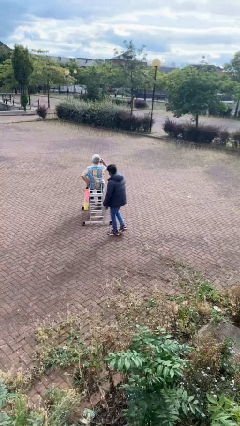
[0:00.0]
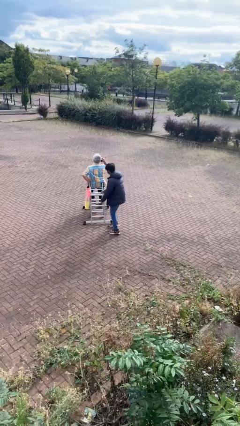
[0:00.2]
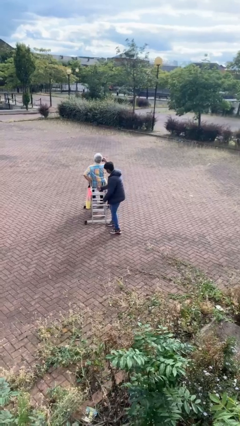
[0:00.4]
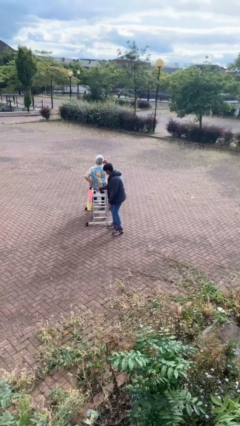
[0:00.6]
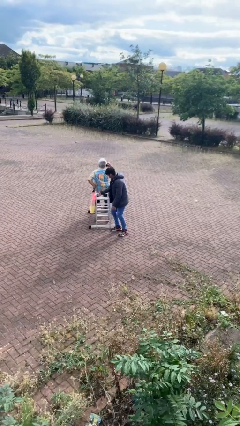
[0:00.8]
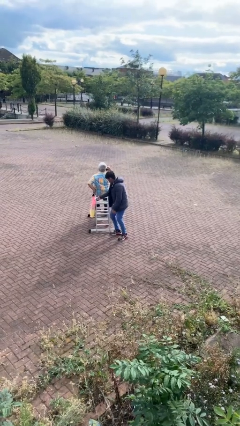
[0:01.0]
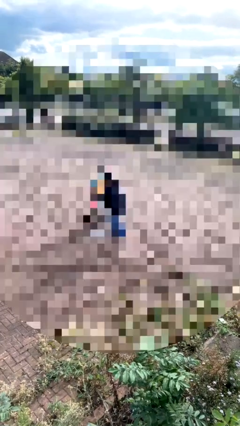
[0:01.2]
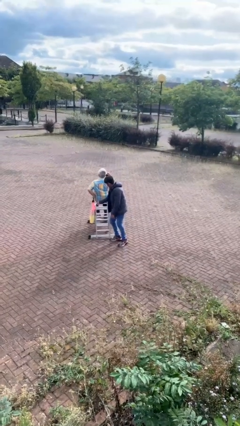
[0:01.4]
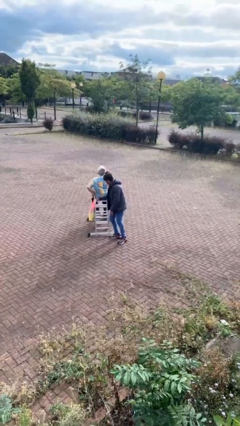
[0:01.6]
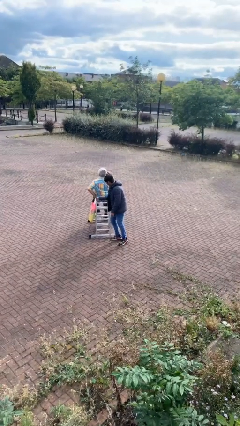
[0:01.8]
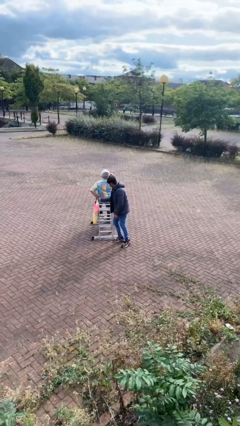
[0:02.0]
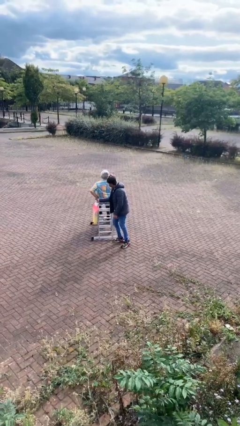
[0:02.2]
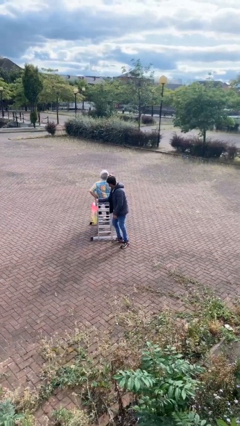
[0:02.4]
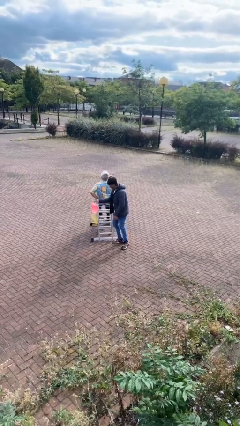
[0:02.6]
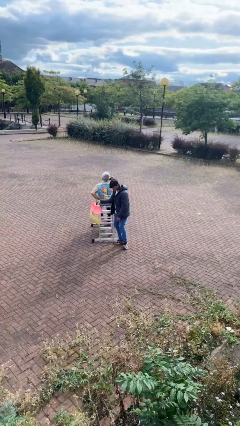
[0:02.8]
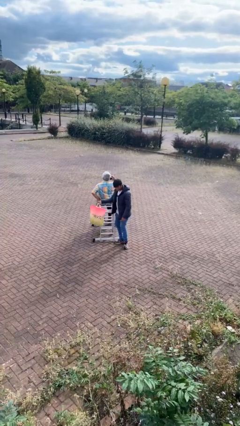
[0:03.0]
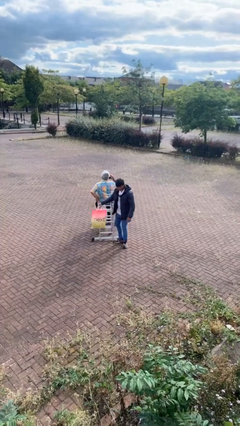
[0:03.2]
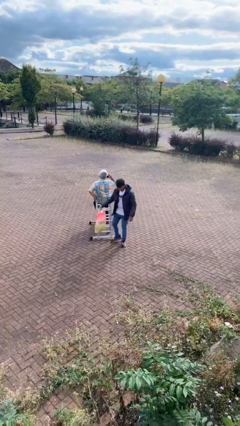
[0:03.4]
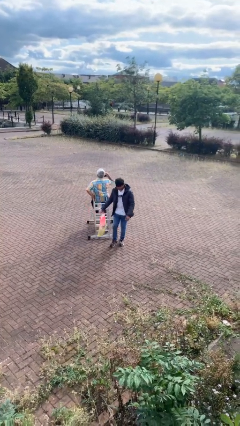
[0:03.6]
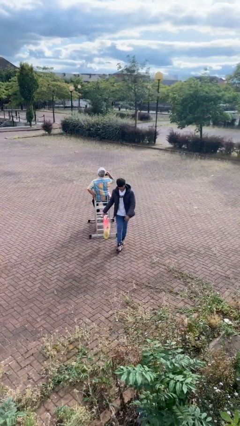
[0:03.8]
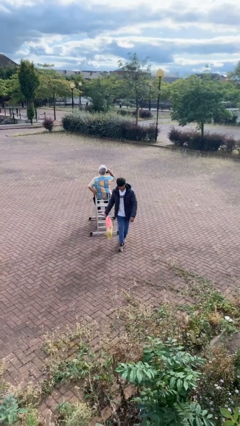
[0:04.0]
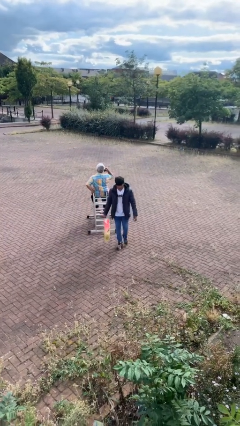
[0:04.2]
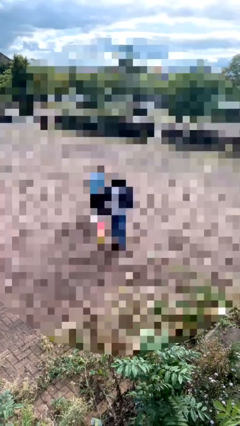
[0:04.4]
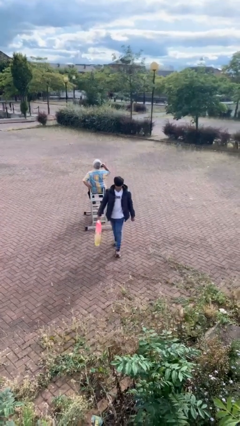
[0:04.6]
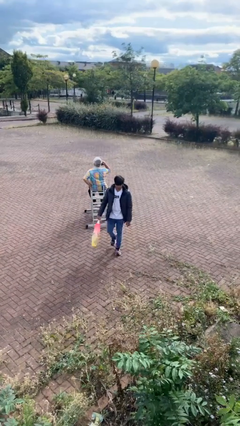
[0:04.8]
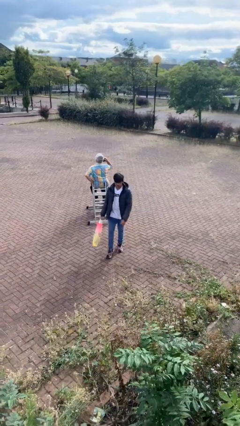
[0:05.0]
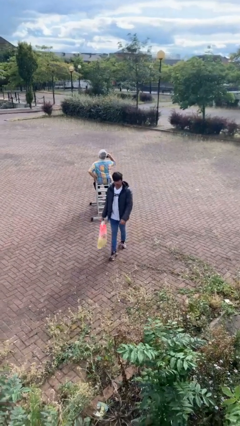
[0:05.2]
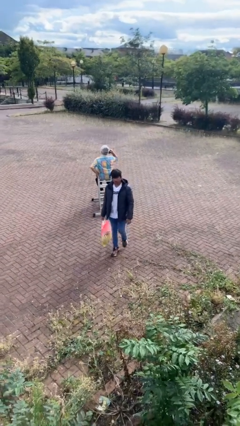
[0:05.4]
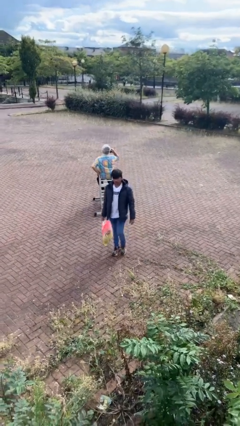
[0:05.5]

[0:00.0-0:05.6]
person steals object from person

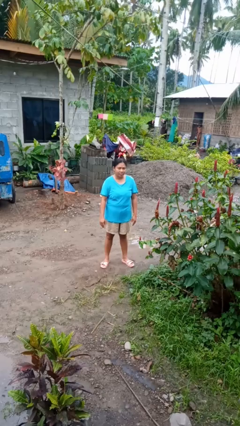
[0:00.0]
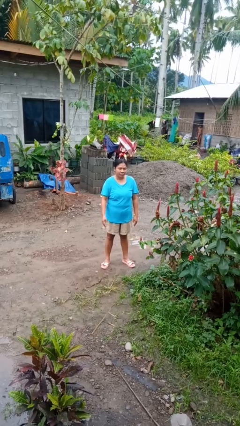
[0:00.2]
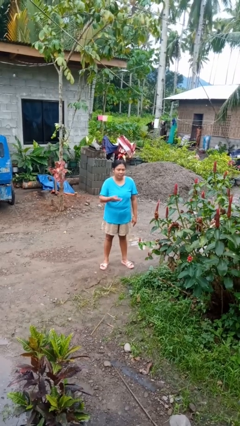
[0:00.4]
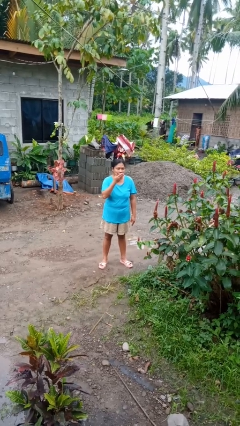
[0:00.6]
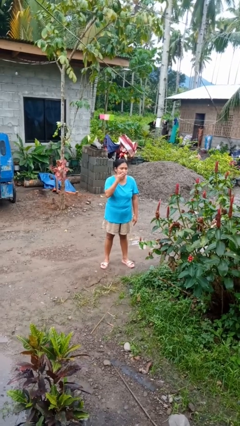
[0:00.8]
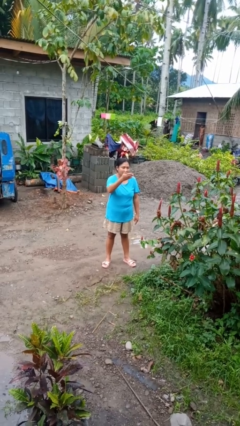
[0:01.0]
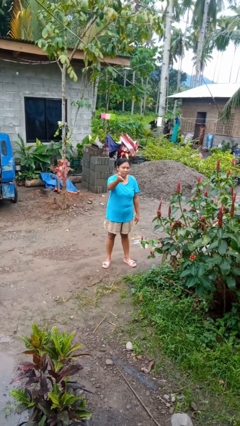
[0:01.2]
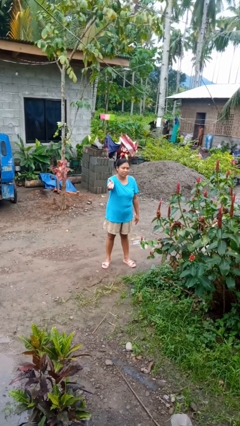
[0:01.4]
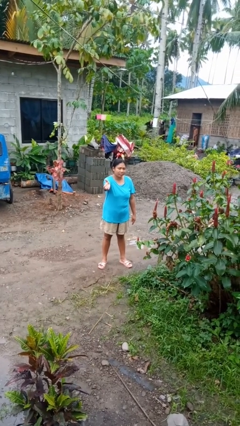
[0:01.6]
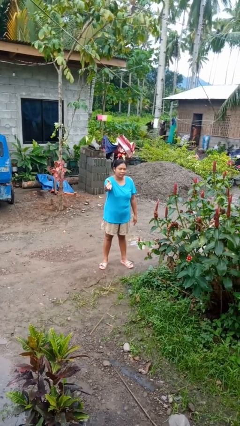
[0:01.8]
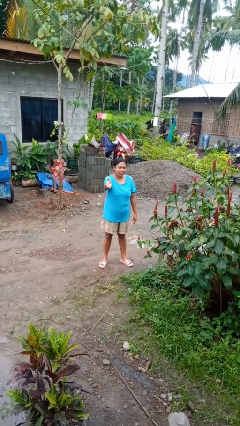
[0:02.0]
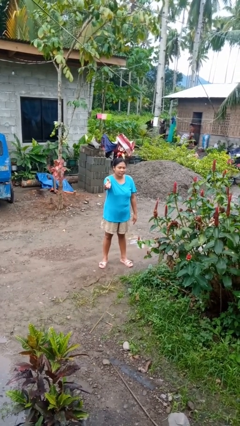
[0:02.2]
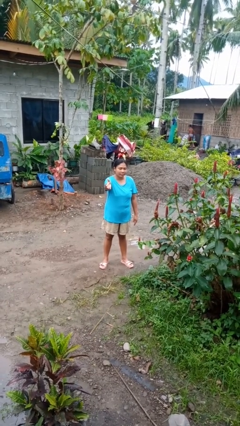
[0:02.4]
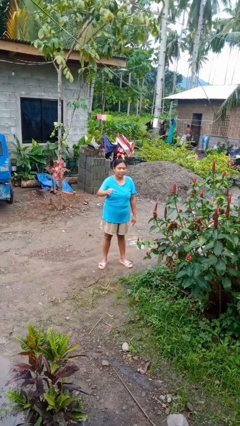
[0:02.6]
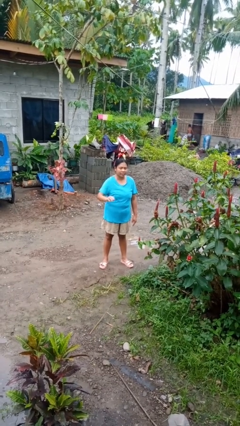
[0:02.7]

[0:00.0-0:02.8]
person gestures blow kiss

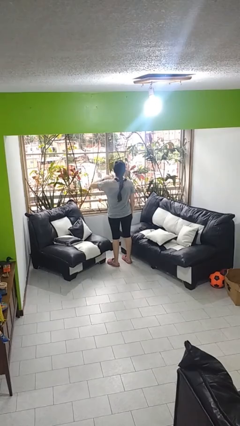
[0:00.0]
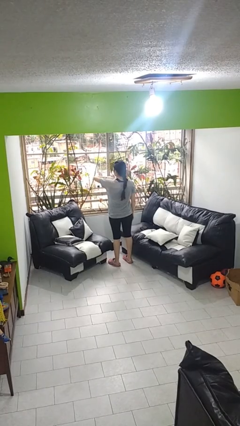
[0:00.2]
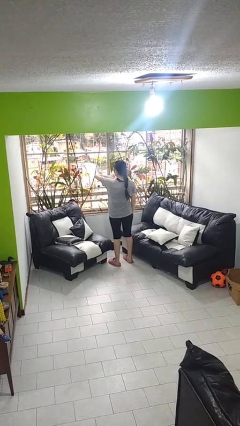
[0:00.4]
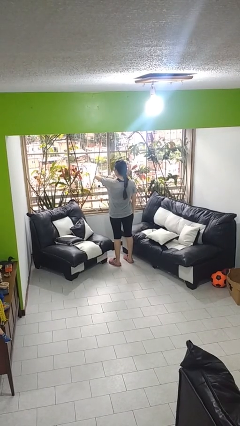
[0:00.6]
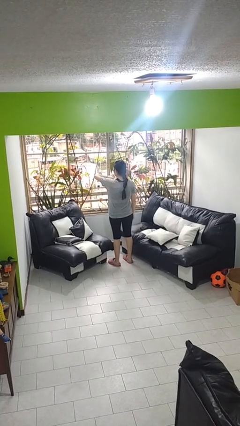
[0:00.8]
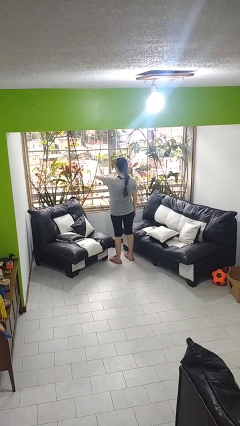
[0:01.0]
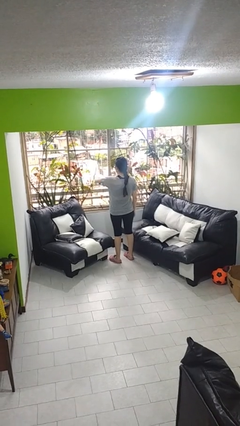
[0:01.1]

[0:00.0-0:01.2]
person looks at wristwatch

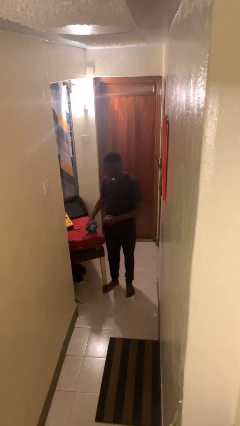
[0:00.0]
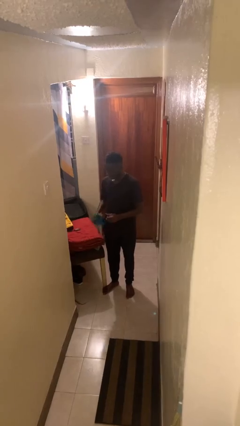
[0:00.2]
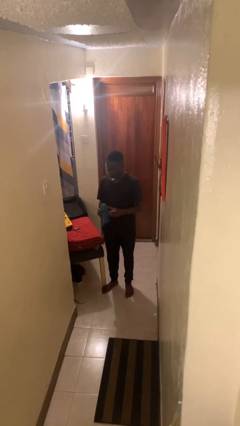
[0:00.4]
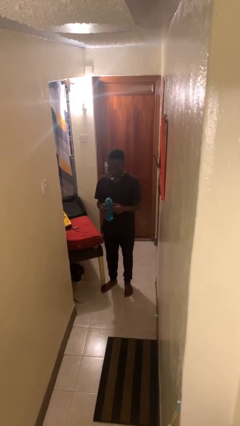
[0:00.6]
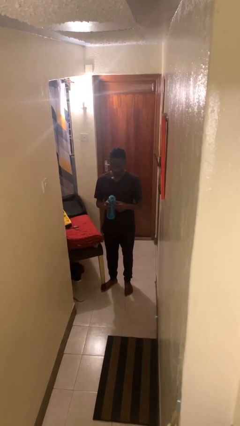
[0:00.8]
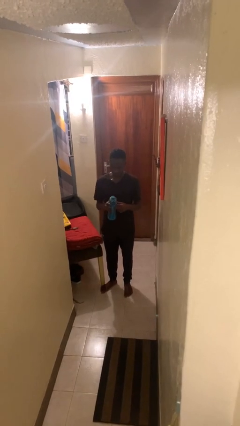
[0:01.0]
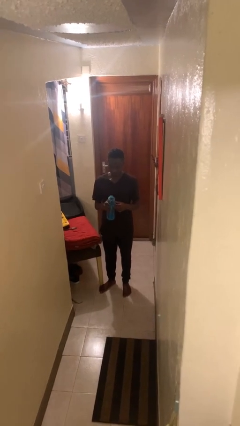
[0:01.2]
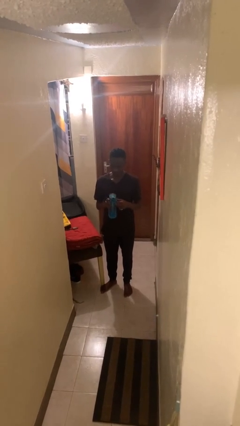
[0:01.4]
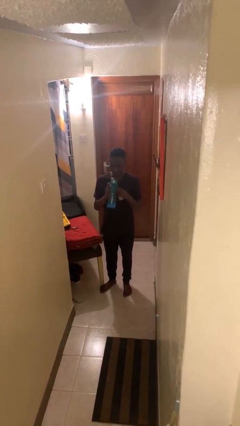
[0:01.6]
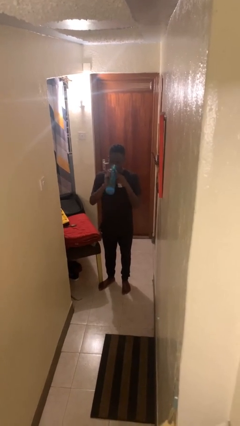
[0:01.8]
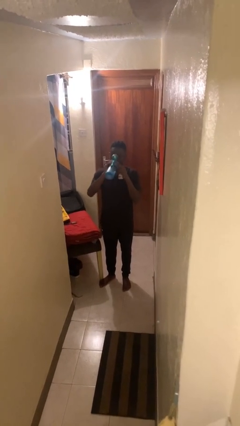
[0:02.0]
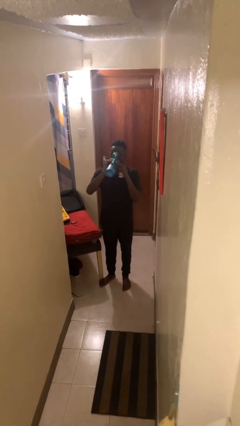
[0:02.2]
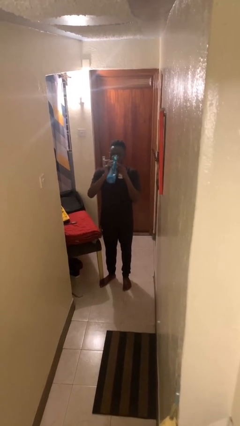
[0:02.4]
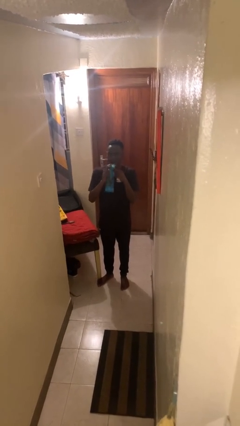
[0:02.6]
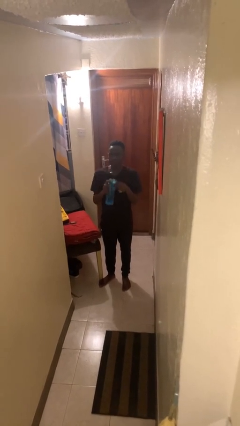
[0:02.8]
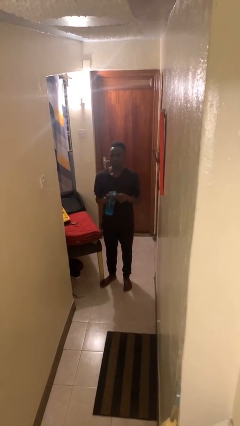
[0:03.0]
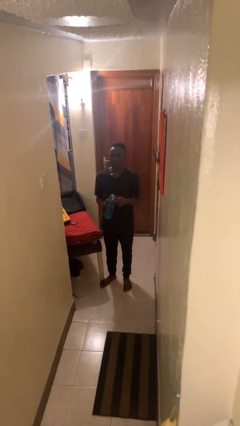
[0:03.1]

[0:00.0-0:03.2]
person drinks from cup

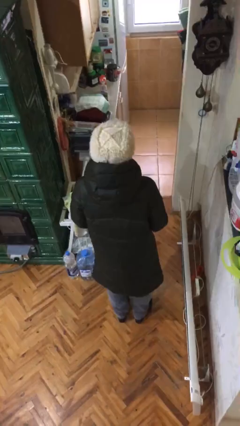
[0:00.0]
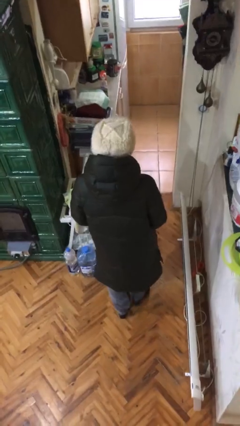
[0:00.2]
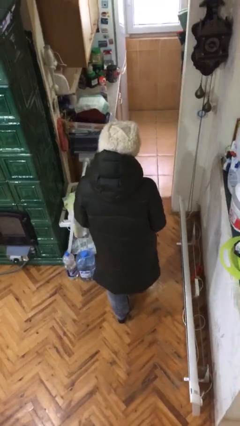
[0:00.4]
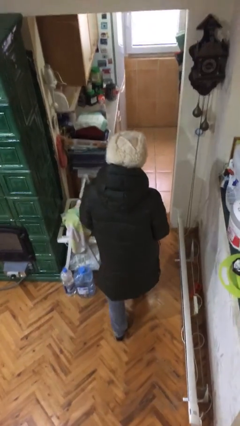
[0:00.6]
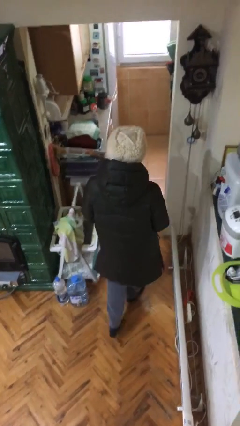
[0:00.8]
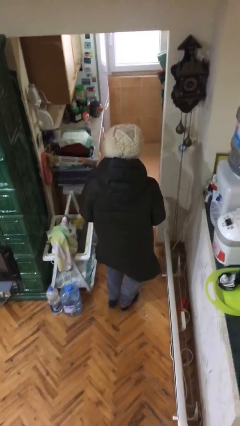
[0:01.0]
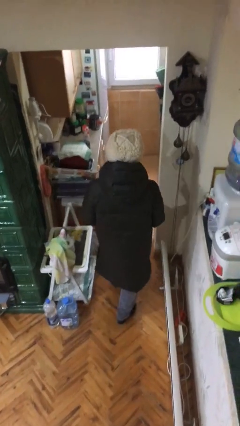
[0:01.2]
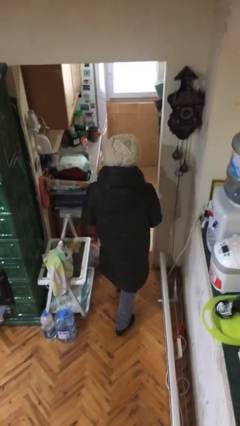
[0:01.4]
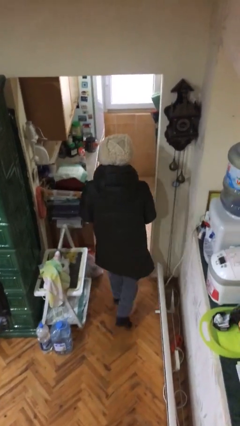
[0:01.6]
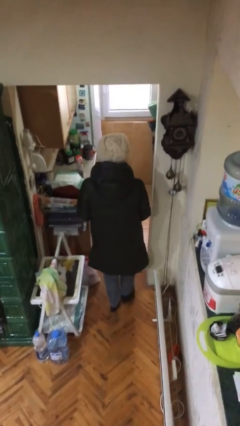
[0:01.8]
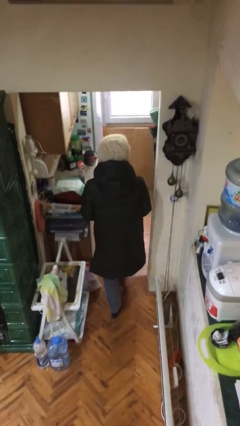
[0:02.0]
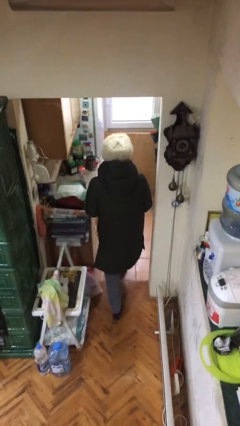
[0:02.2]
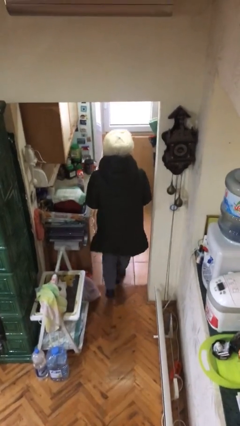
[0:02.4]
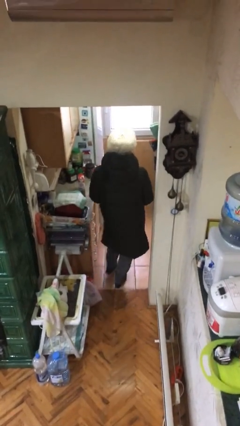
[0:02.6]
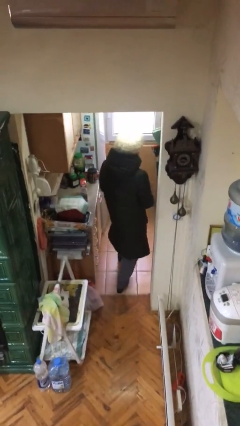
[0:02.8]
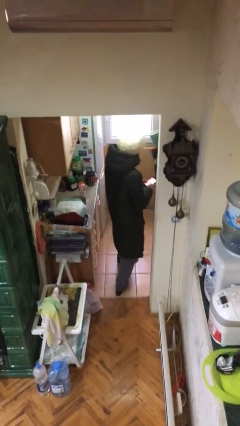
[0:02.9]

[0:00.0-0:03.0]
person exits scene through structure

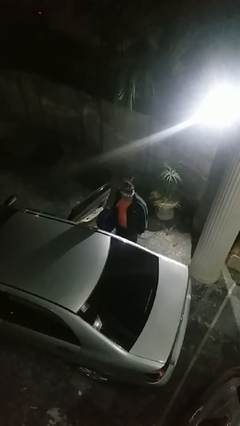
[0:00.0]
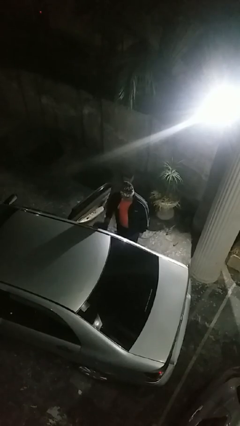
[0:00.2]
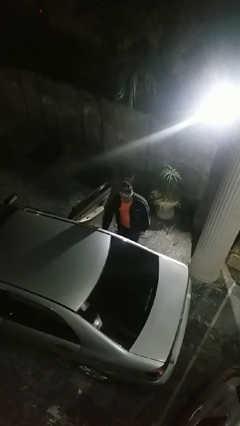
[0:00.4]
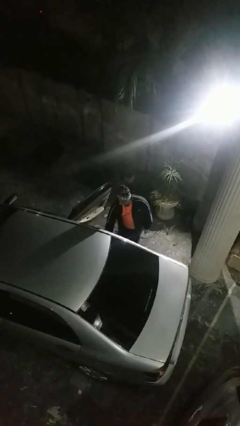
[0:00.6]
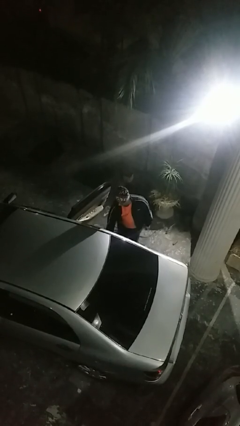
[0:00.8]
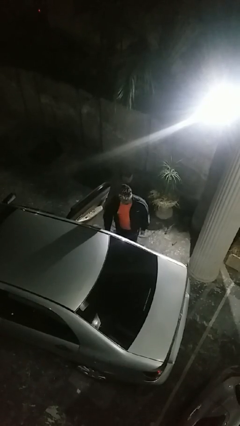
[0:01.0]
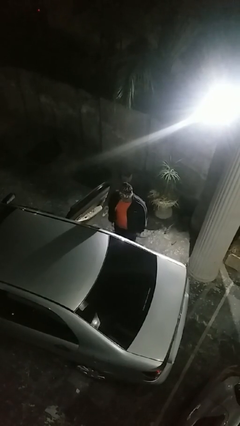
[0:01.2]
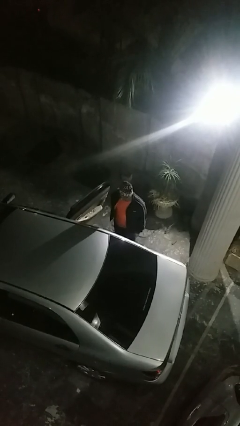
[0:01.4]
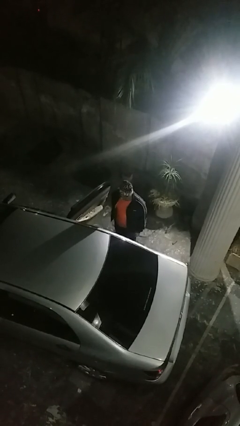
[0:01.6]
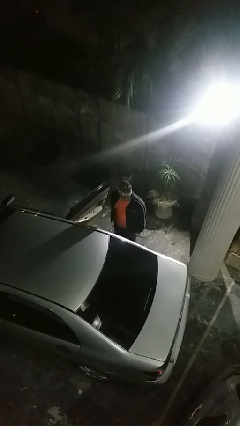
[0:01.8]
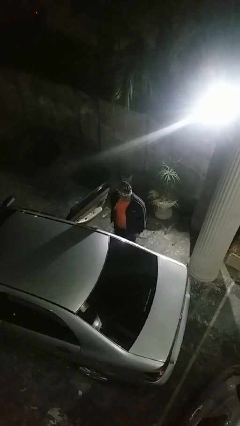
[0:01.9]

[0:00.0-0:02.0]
person loads car
